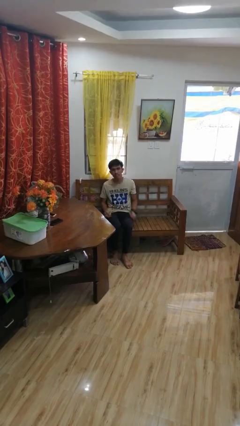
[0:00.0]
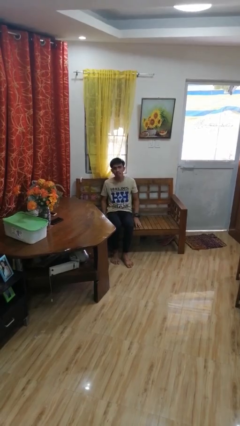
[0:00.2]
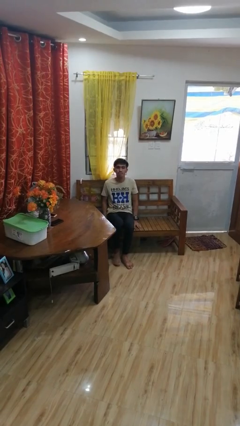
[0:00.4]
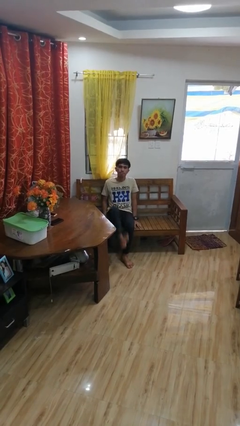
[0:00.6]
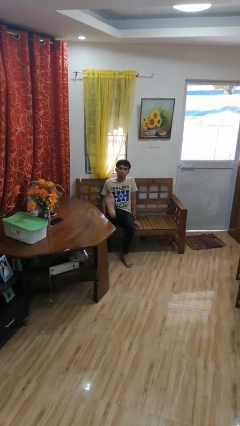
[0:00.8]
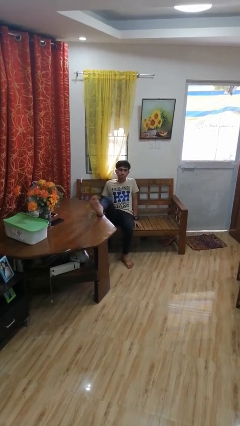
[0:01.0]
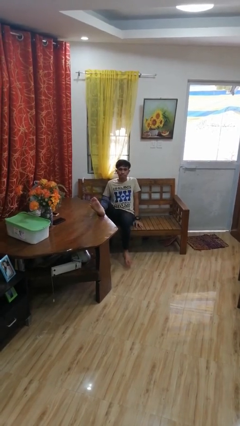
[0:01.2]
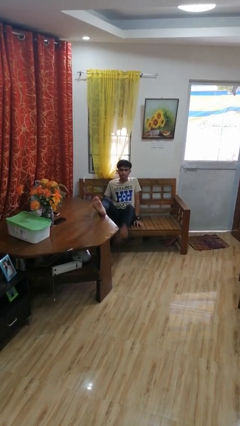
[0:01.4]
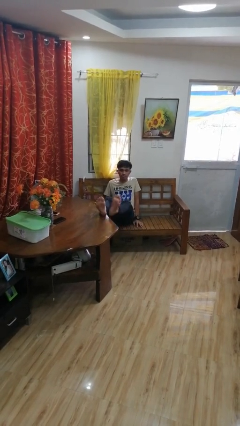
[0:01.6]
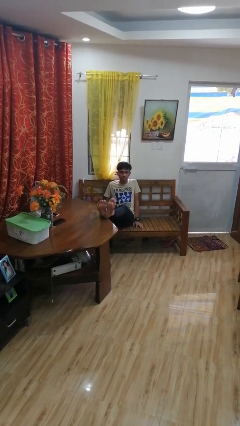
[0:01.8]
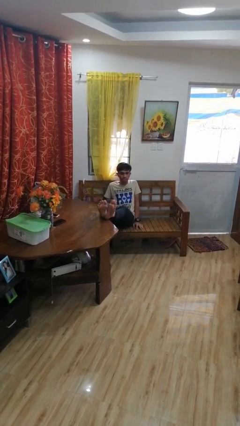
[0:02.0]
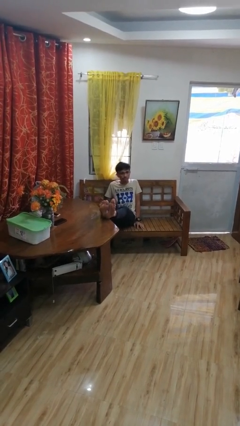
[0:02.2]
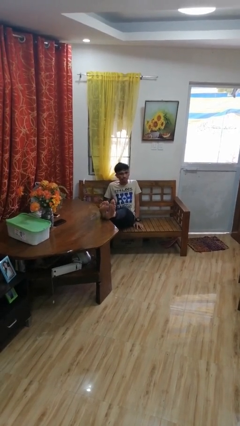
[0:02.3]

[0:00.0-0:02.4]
person puts feet up

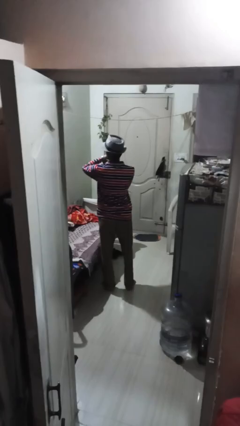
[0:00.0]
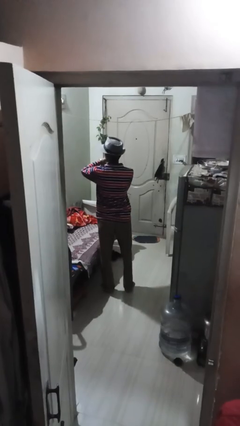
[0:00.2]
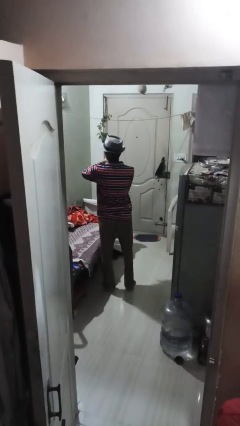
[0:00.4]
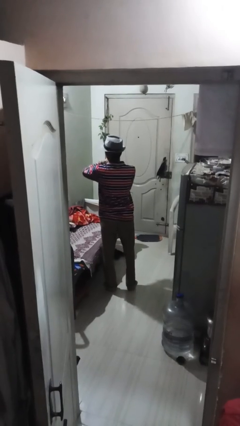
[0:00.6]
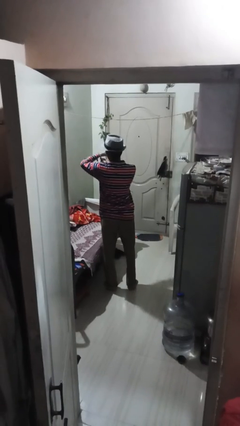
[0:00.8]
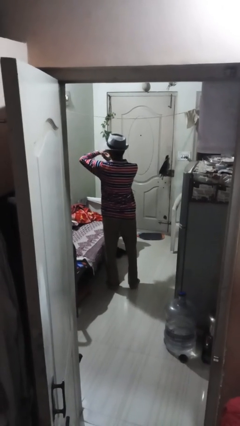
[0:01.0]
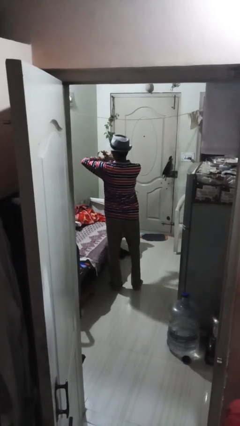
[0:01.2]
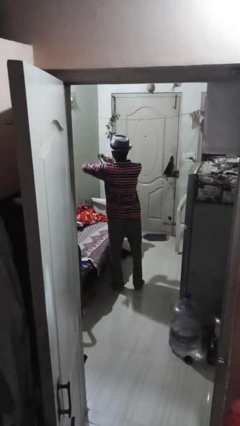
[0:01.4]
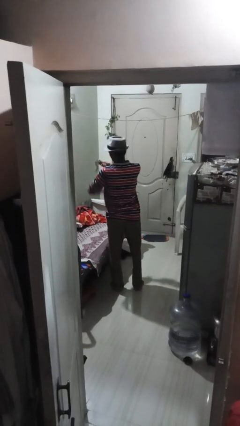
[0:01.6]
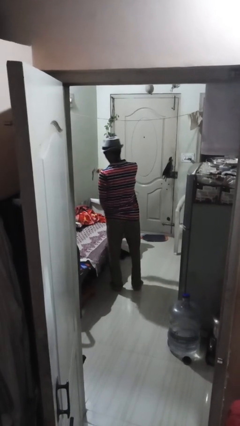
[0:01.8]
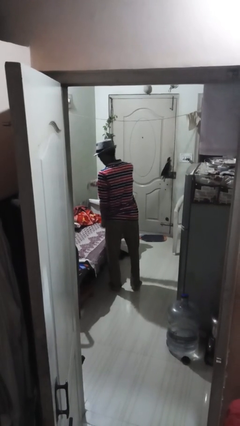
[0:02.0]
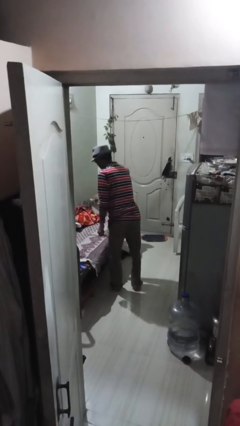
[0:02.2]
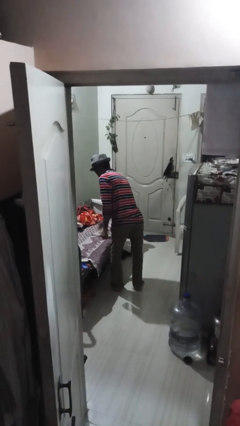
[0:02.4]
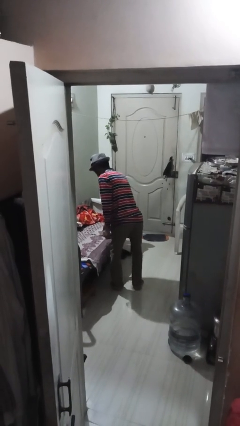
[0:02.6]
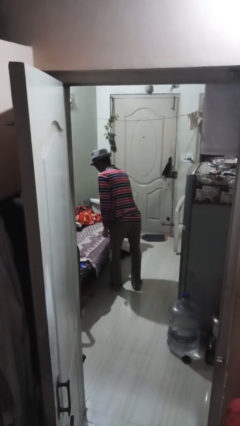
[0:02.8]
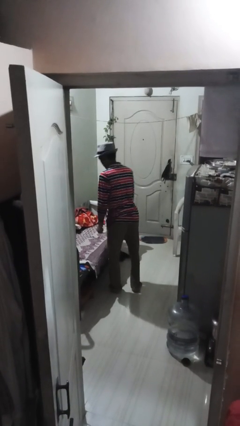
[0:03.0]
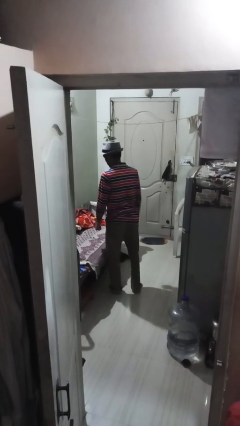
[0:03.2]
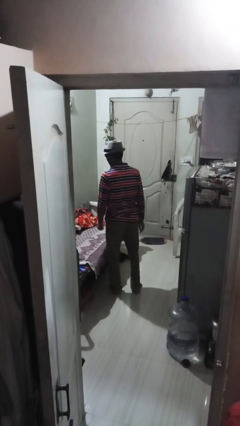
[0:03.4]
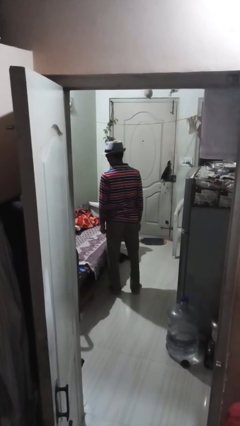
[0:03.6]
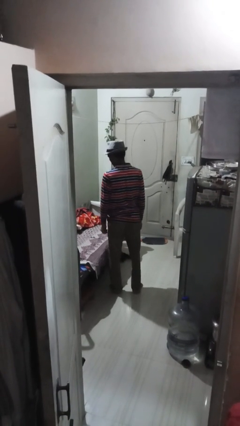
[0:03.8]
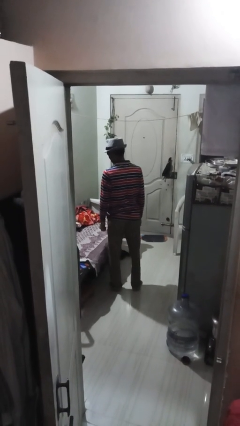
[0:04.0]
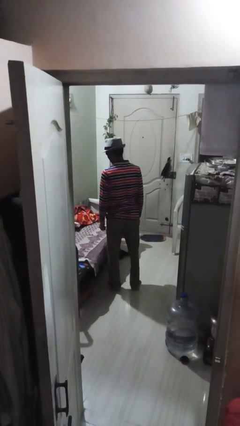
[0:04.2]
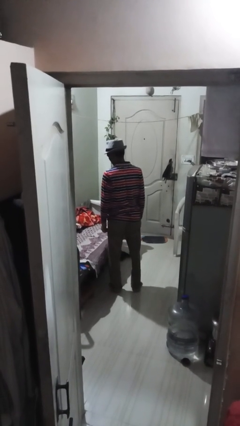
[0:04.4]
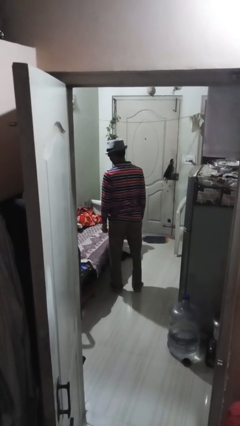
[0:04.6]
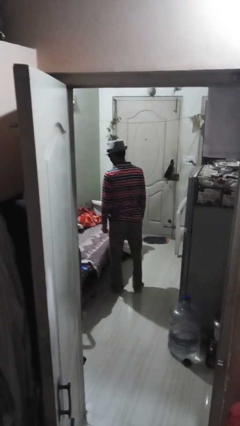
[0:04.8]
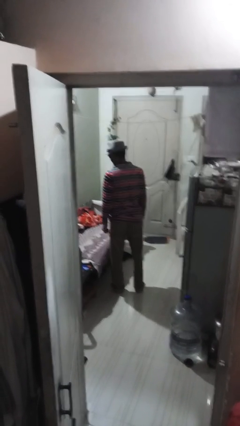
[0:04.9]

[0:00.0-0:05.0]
person takes off wristwatch

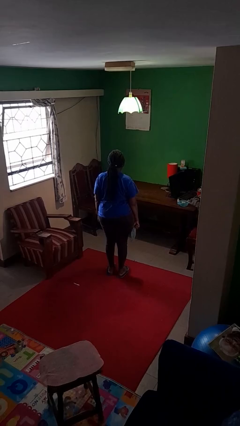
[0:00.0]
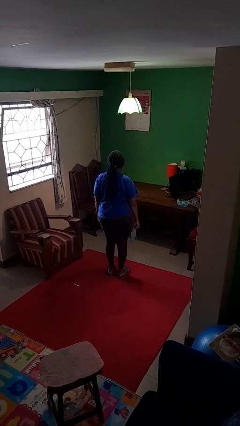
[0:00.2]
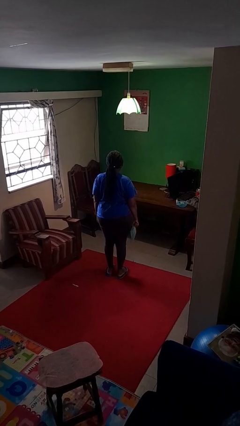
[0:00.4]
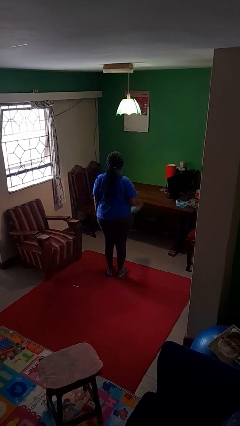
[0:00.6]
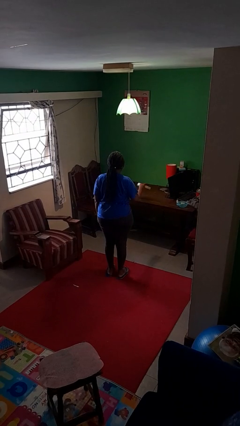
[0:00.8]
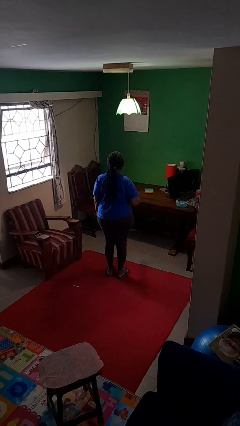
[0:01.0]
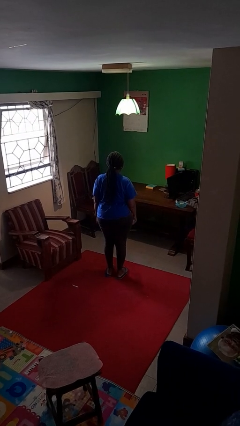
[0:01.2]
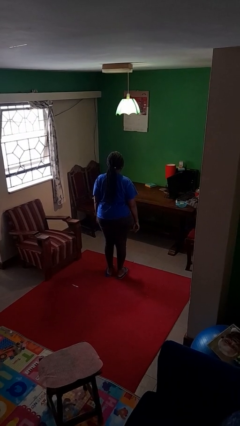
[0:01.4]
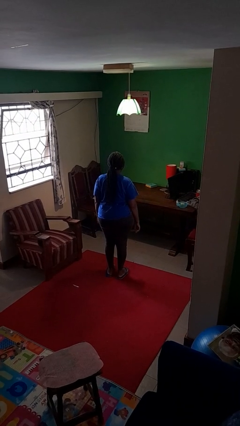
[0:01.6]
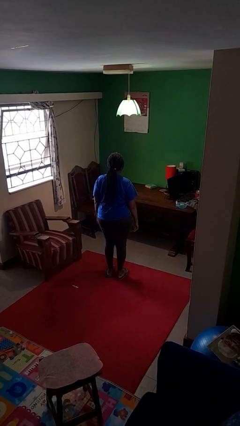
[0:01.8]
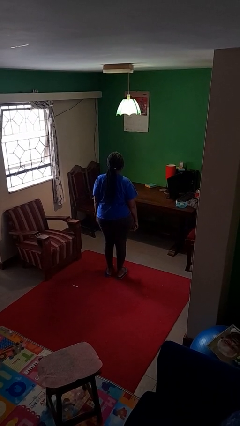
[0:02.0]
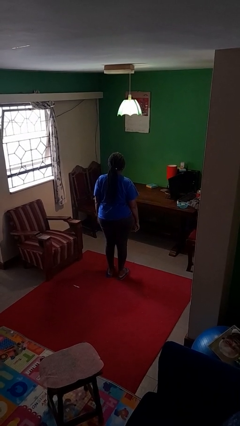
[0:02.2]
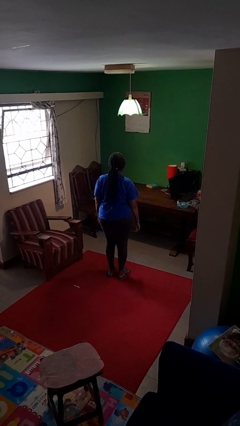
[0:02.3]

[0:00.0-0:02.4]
person throws object on table

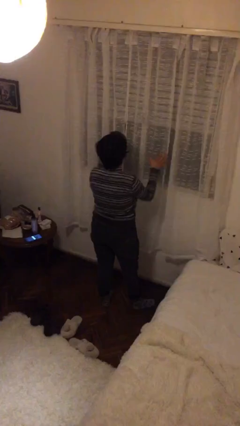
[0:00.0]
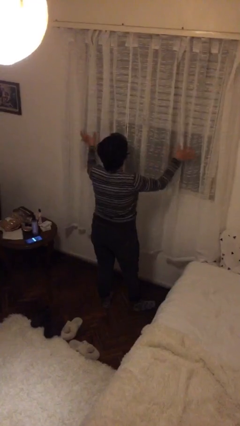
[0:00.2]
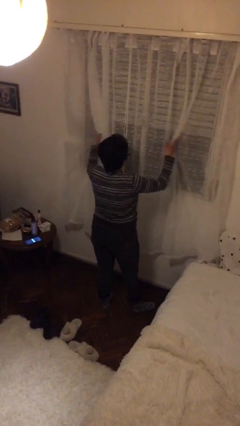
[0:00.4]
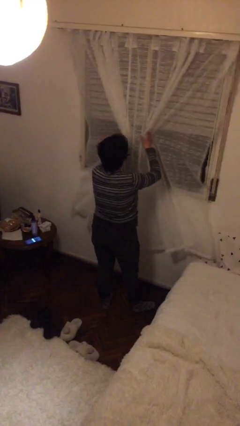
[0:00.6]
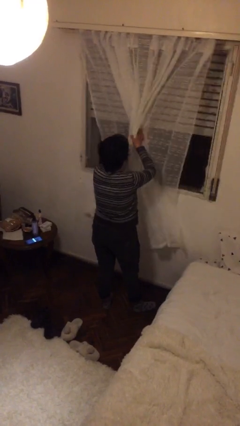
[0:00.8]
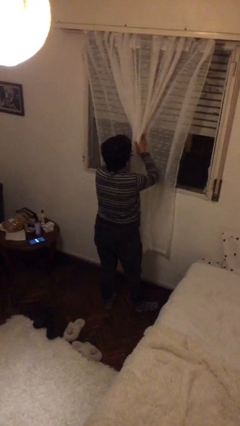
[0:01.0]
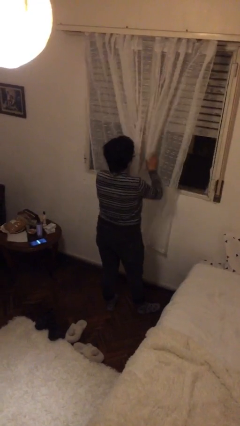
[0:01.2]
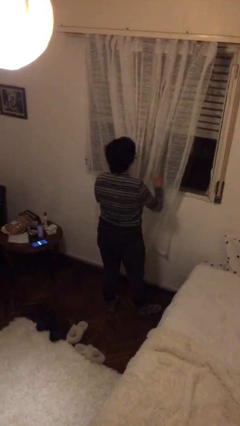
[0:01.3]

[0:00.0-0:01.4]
person closes curtains

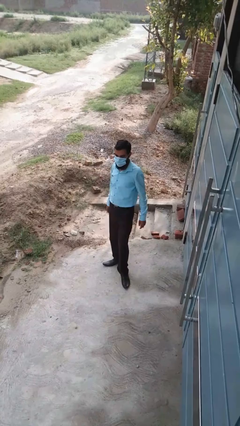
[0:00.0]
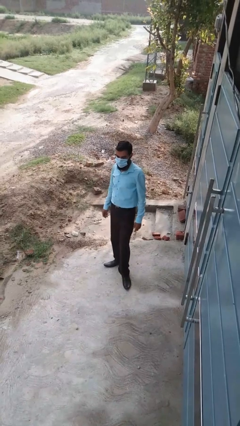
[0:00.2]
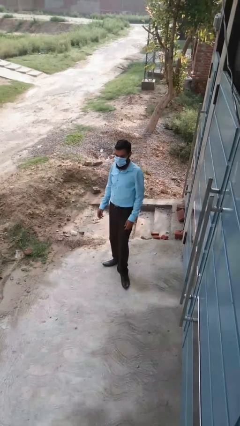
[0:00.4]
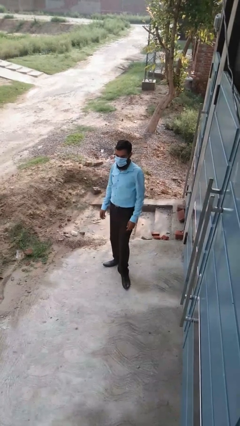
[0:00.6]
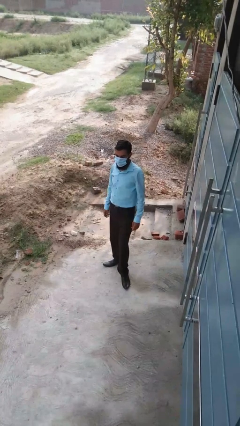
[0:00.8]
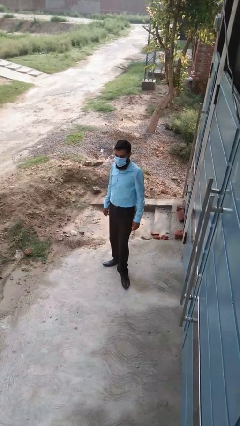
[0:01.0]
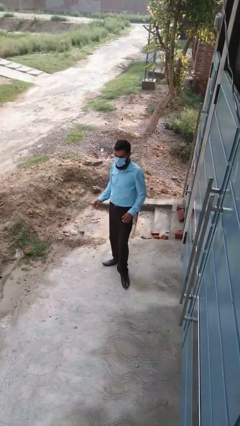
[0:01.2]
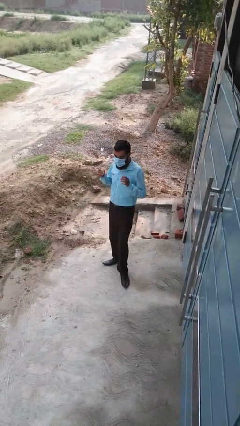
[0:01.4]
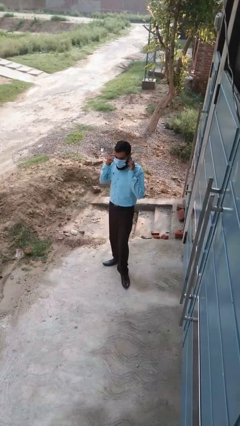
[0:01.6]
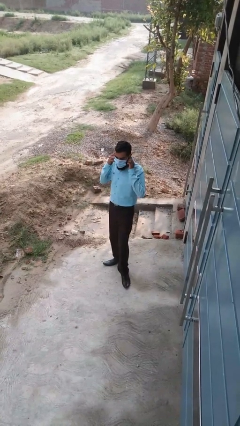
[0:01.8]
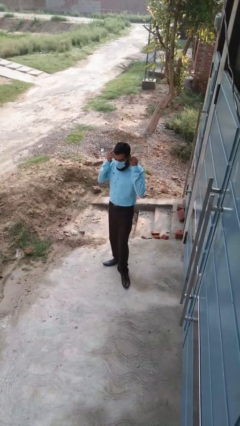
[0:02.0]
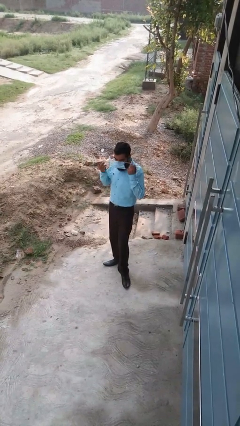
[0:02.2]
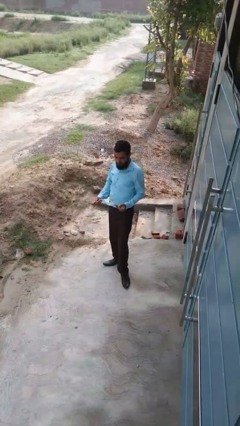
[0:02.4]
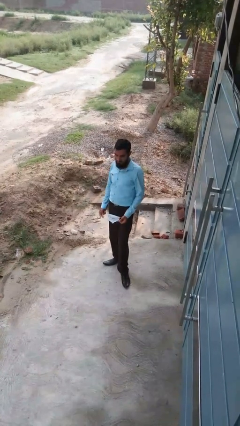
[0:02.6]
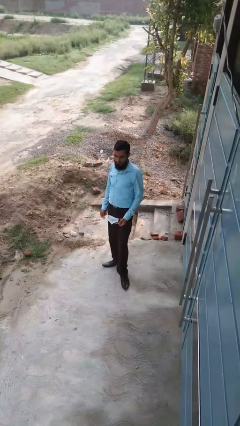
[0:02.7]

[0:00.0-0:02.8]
person takes off facemask

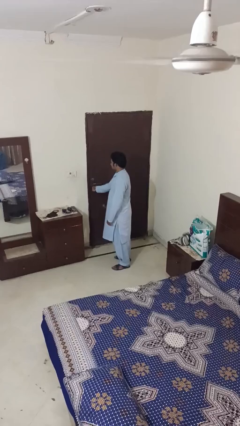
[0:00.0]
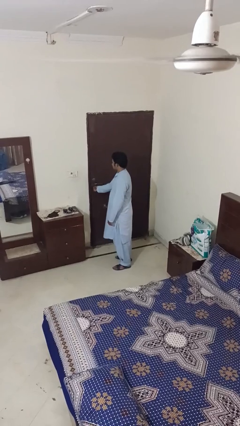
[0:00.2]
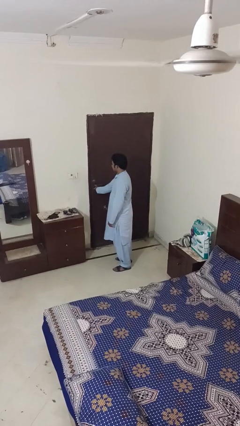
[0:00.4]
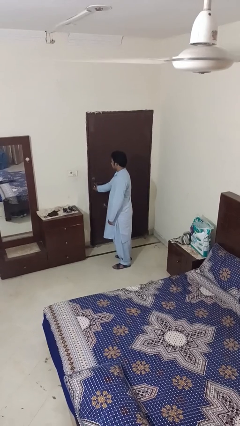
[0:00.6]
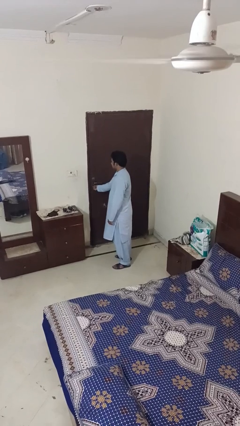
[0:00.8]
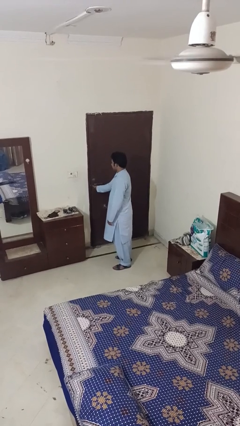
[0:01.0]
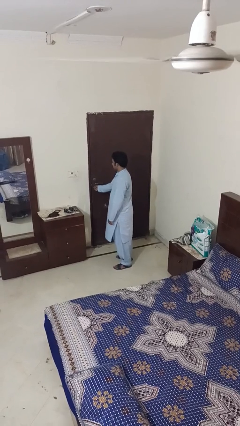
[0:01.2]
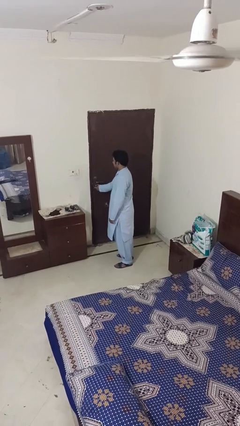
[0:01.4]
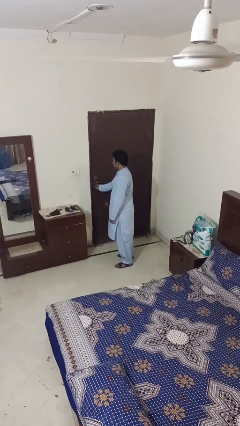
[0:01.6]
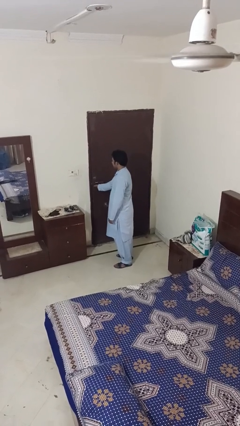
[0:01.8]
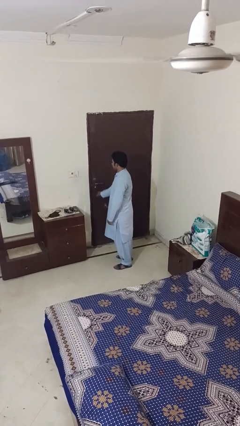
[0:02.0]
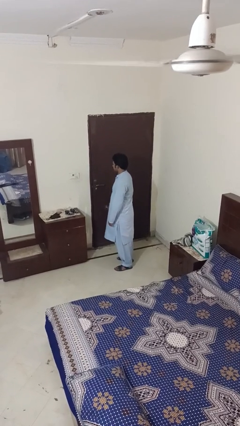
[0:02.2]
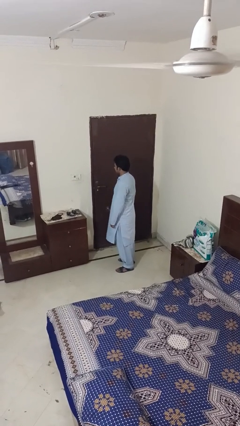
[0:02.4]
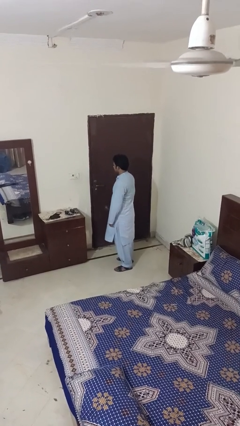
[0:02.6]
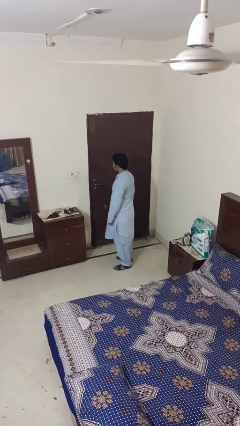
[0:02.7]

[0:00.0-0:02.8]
person locks door with keys

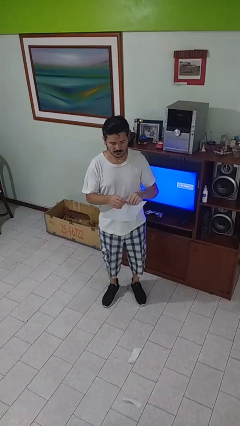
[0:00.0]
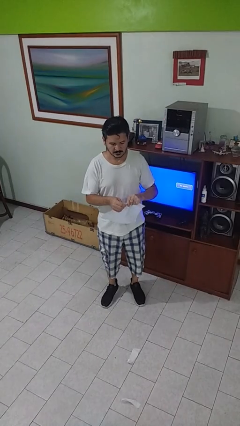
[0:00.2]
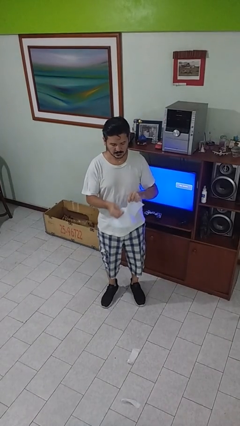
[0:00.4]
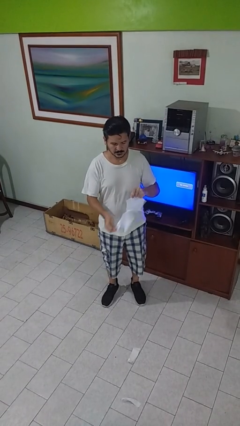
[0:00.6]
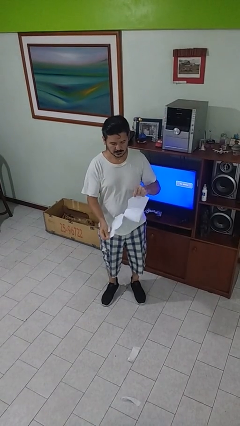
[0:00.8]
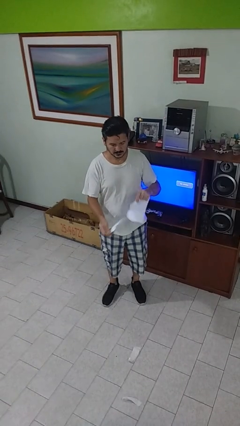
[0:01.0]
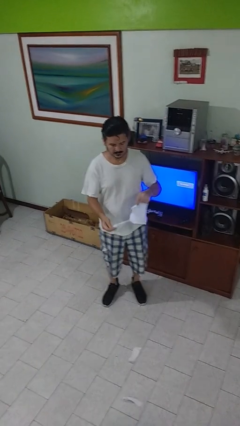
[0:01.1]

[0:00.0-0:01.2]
person tears paper
